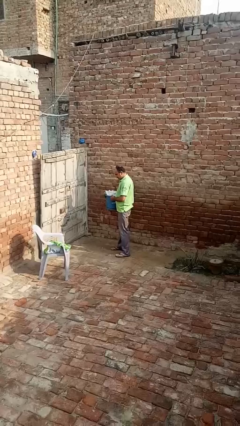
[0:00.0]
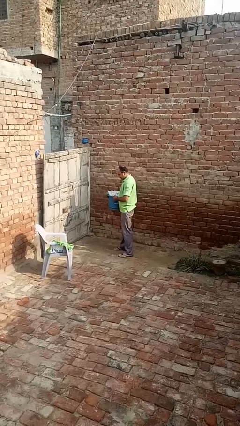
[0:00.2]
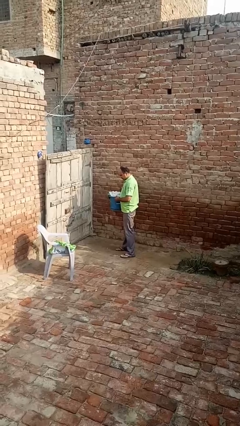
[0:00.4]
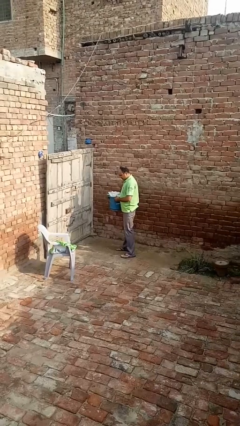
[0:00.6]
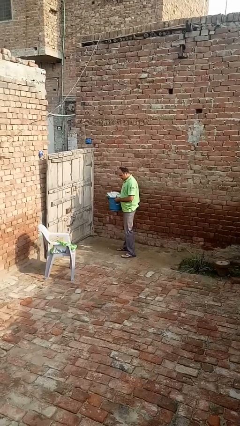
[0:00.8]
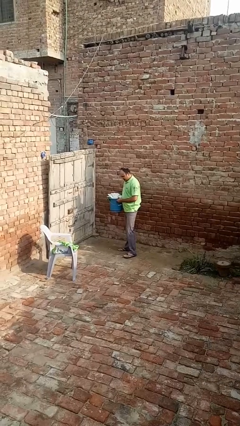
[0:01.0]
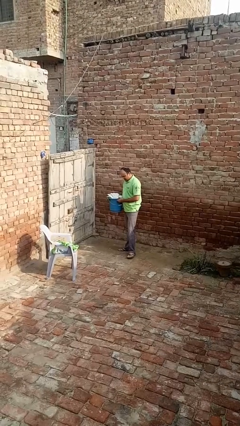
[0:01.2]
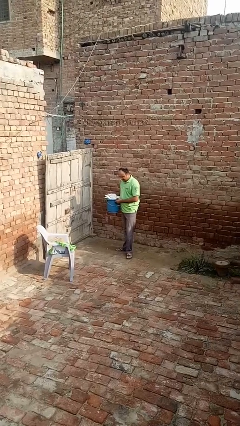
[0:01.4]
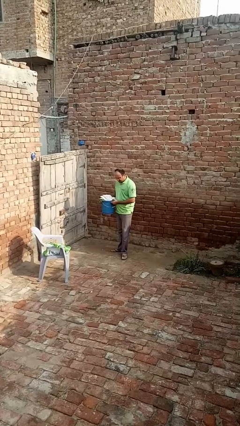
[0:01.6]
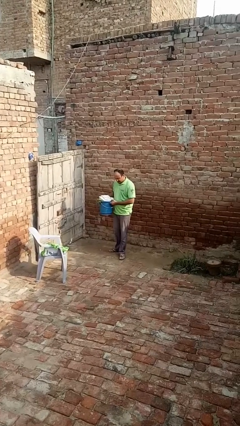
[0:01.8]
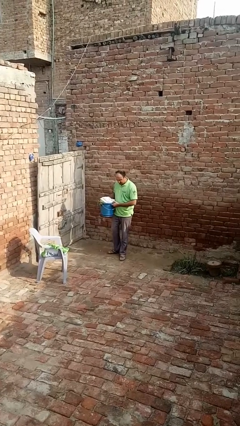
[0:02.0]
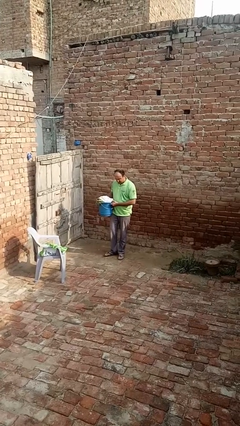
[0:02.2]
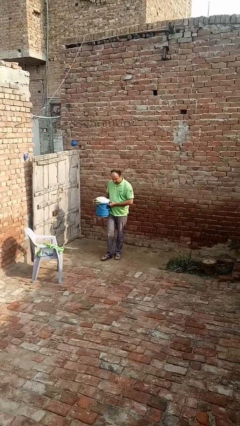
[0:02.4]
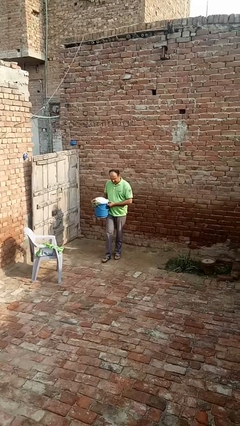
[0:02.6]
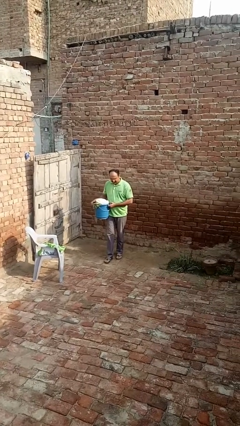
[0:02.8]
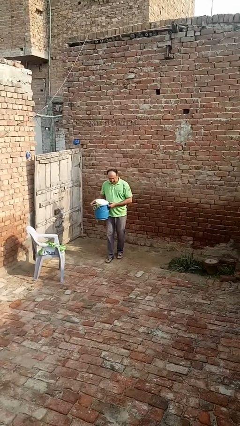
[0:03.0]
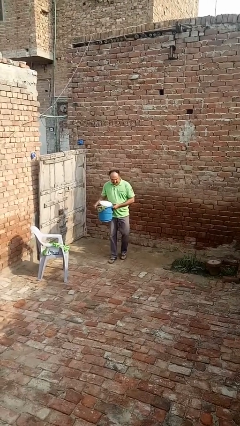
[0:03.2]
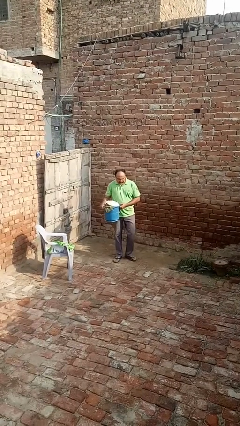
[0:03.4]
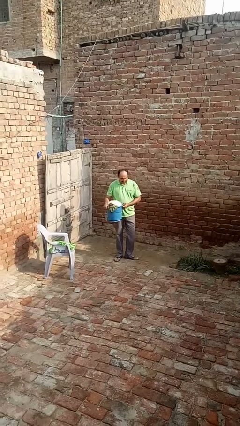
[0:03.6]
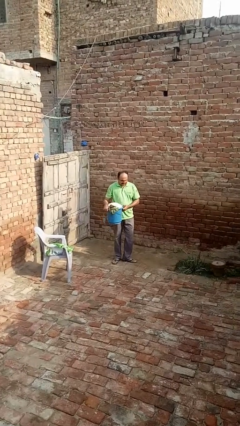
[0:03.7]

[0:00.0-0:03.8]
person carries laundry basket

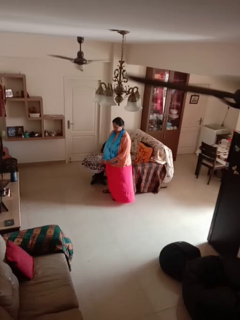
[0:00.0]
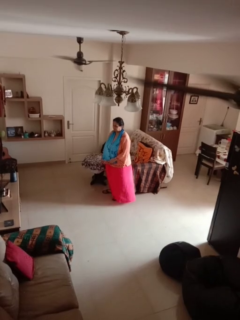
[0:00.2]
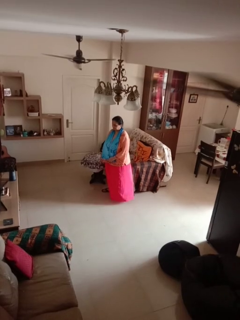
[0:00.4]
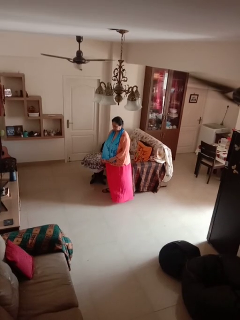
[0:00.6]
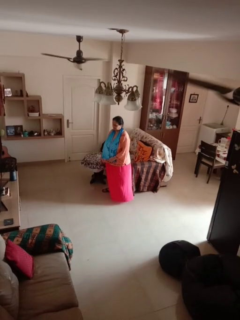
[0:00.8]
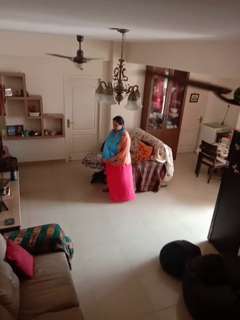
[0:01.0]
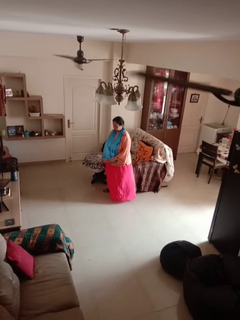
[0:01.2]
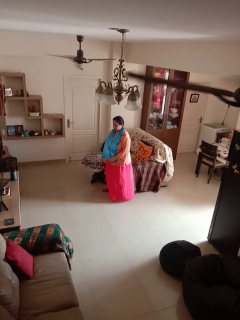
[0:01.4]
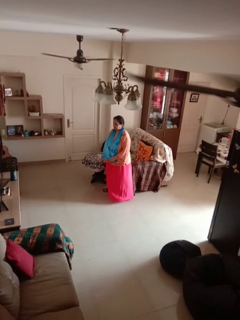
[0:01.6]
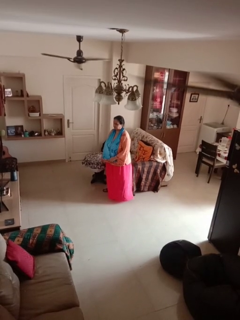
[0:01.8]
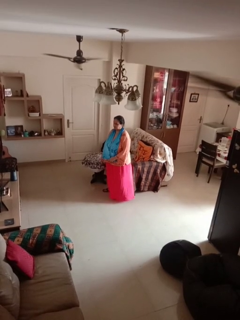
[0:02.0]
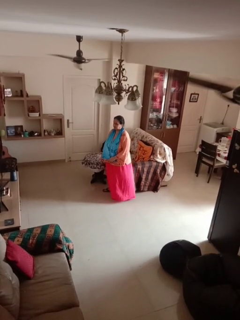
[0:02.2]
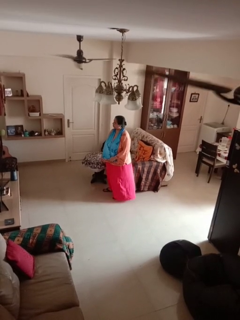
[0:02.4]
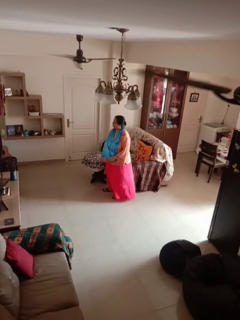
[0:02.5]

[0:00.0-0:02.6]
person nods head

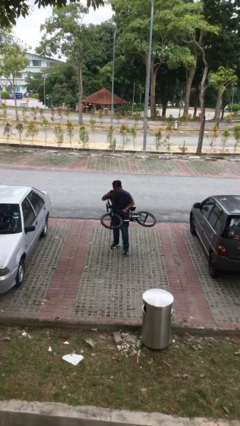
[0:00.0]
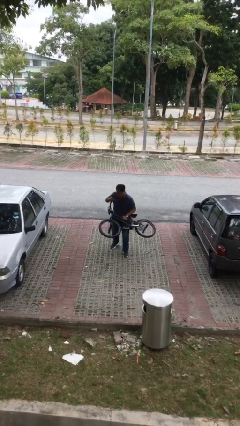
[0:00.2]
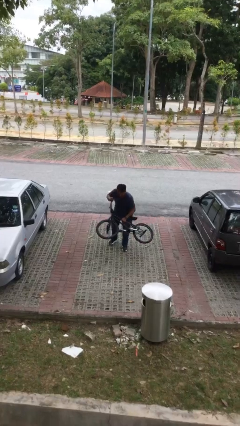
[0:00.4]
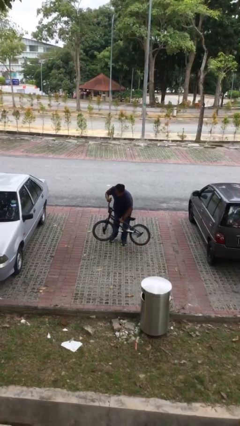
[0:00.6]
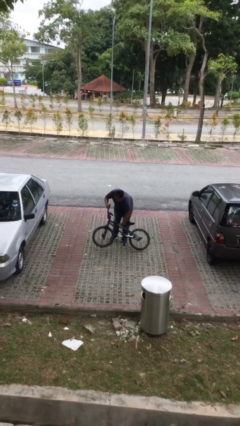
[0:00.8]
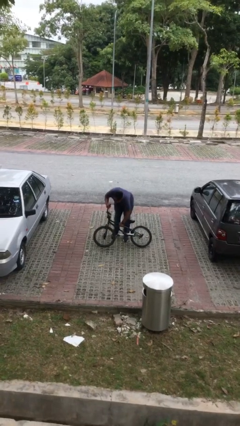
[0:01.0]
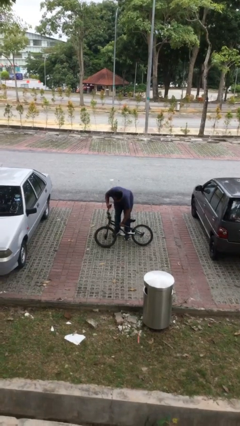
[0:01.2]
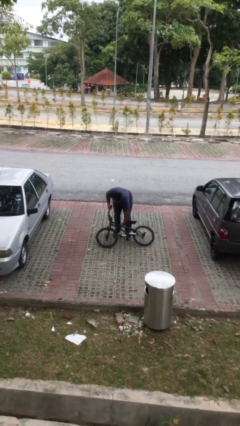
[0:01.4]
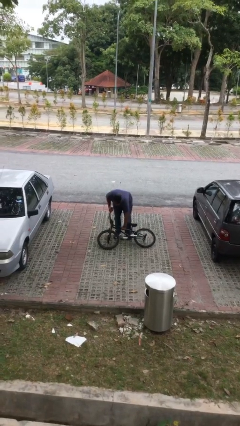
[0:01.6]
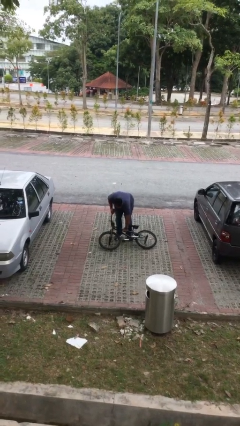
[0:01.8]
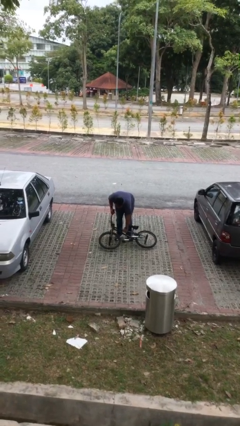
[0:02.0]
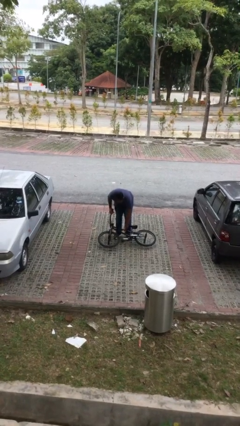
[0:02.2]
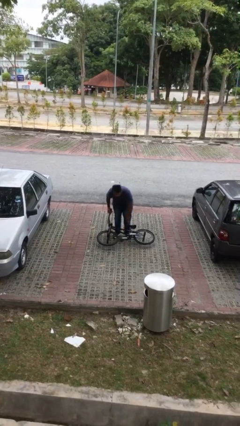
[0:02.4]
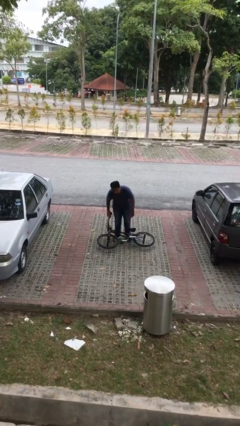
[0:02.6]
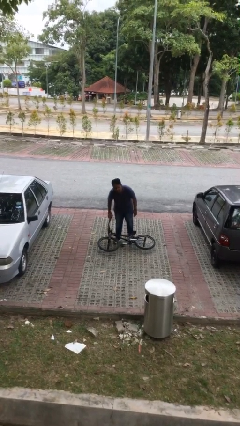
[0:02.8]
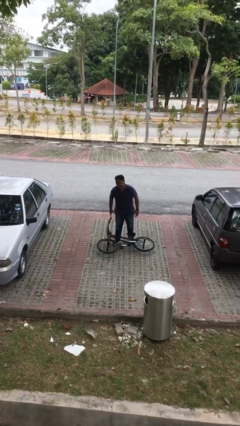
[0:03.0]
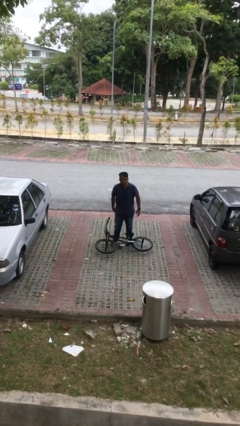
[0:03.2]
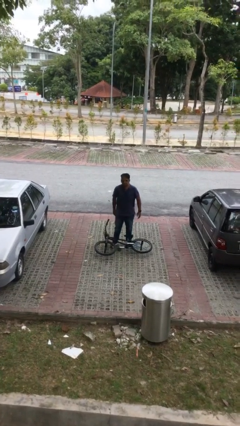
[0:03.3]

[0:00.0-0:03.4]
person puts down object on floor

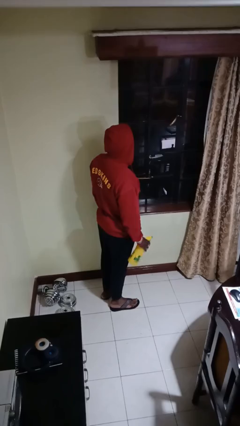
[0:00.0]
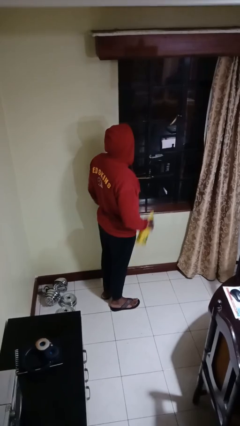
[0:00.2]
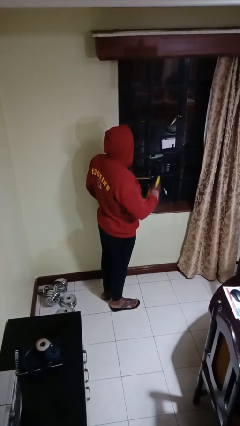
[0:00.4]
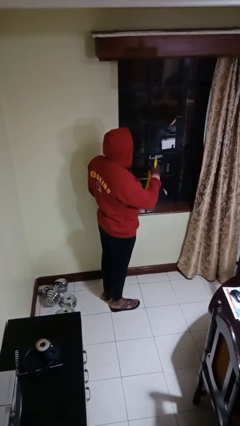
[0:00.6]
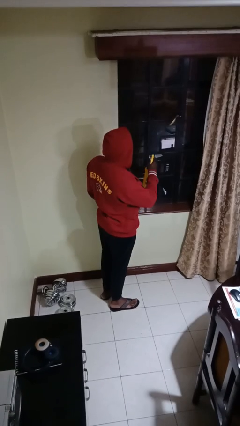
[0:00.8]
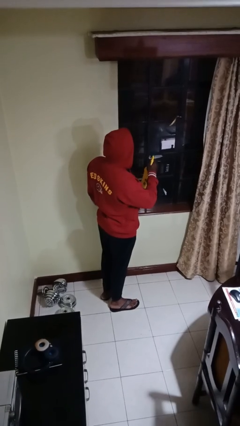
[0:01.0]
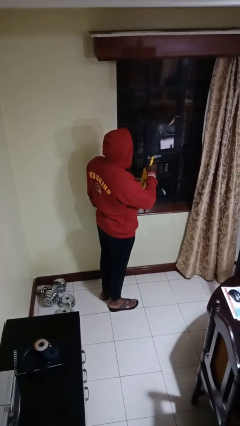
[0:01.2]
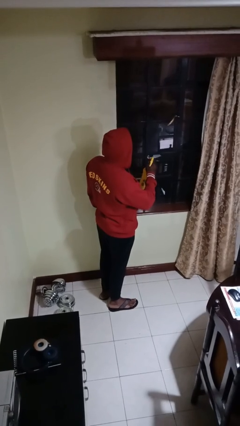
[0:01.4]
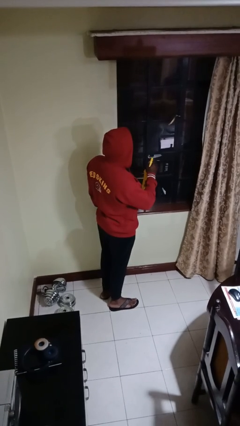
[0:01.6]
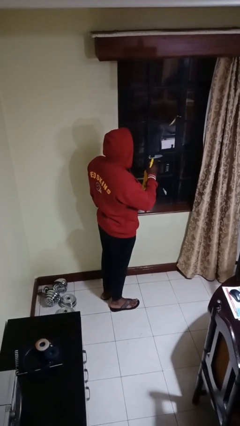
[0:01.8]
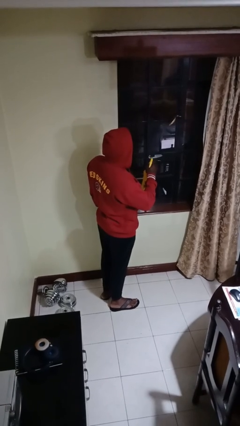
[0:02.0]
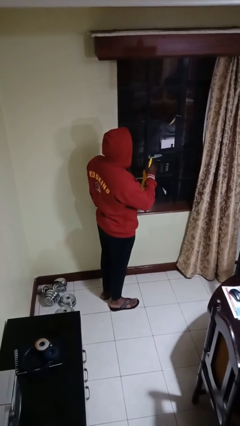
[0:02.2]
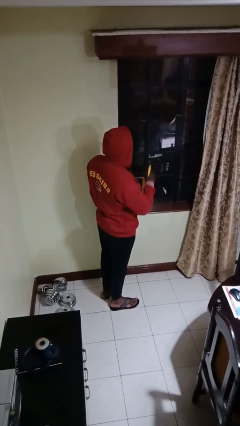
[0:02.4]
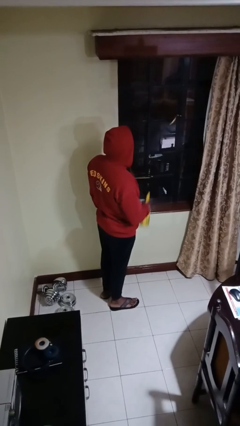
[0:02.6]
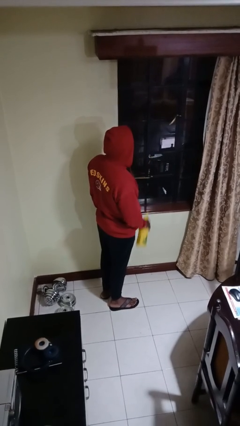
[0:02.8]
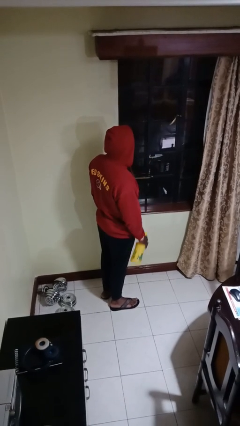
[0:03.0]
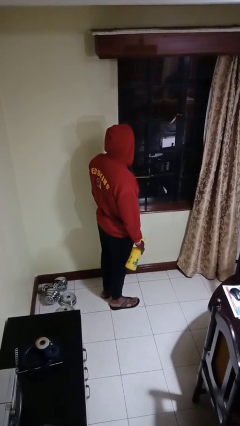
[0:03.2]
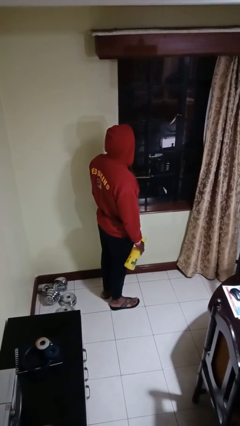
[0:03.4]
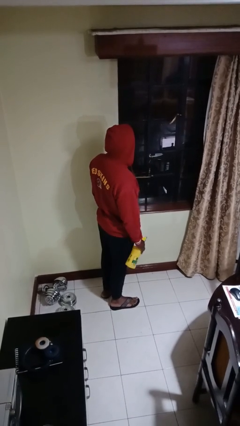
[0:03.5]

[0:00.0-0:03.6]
person sprays from bottle

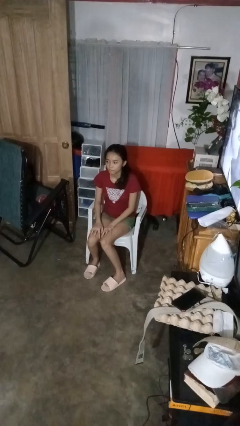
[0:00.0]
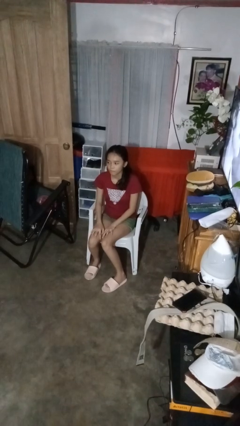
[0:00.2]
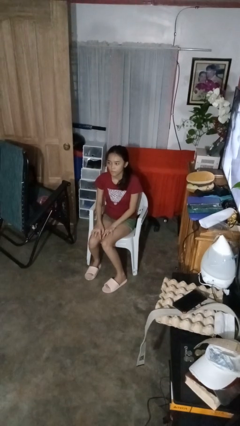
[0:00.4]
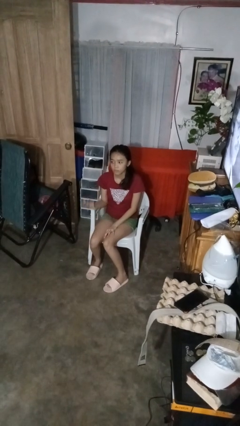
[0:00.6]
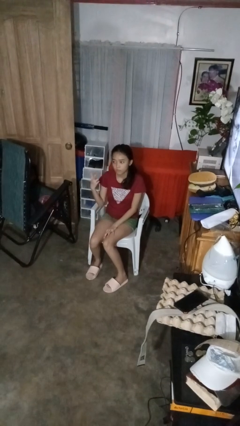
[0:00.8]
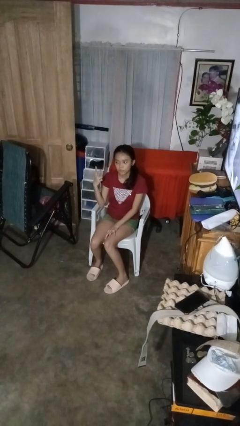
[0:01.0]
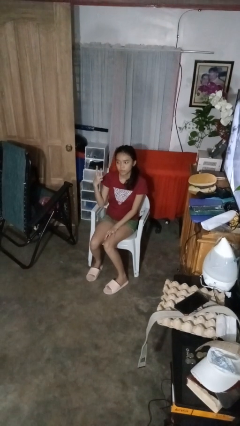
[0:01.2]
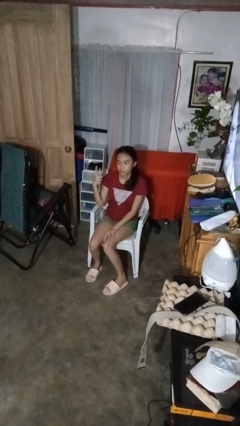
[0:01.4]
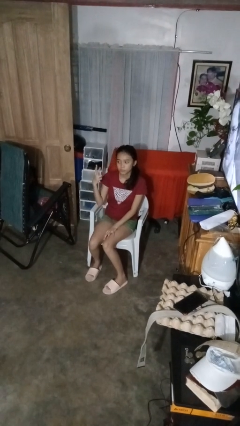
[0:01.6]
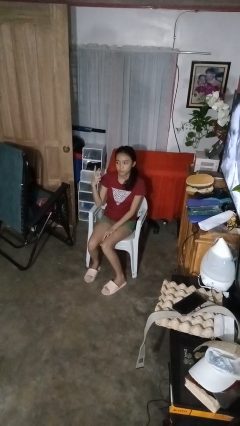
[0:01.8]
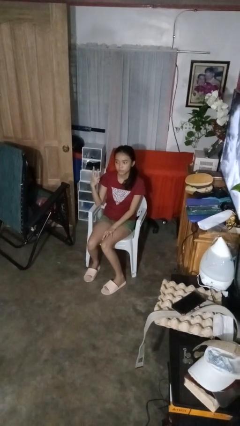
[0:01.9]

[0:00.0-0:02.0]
person gestures peace

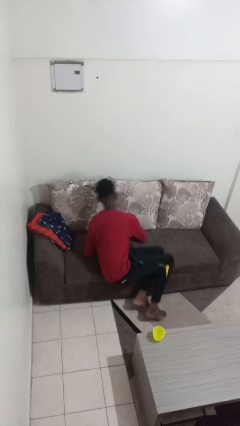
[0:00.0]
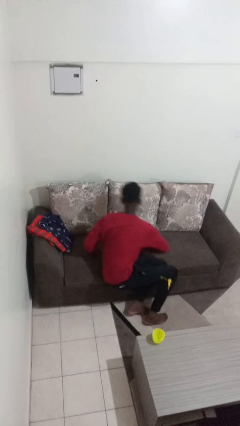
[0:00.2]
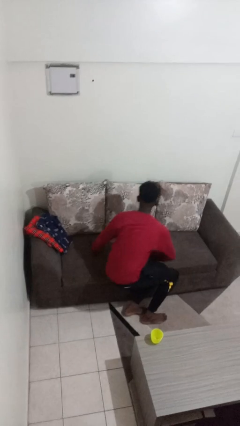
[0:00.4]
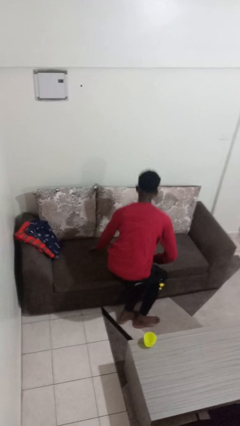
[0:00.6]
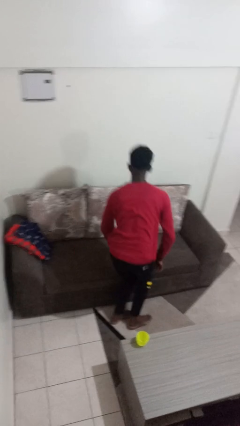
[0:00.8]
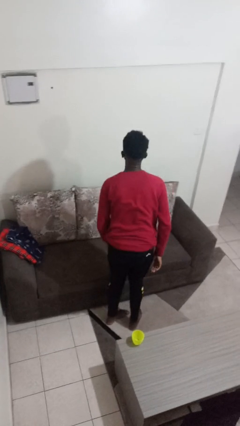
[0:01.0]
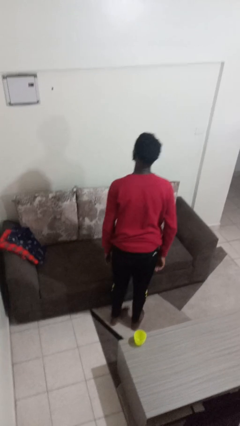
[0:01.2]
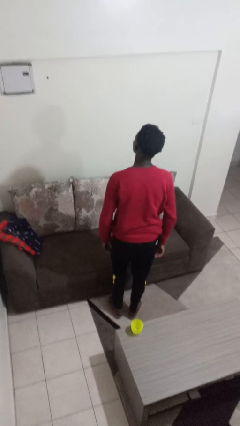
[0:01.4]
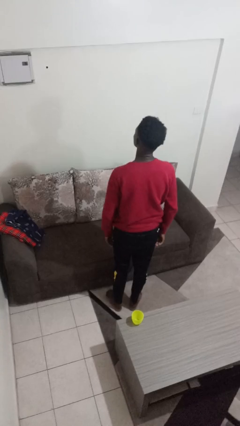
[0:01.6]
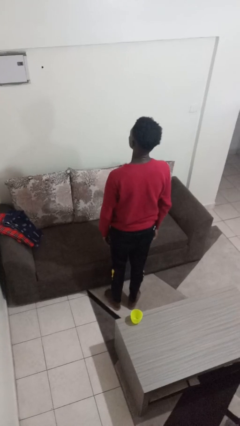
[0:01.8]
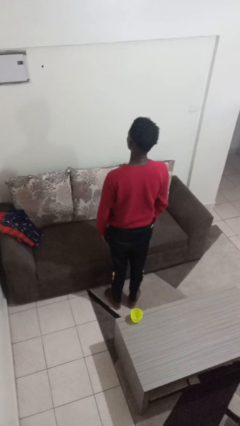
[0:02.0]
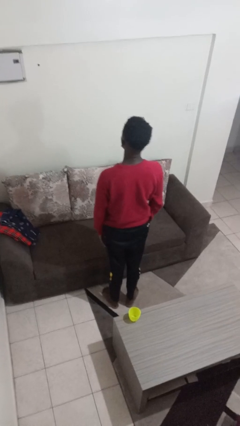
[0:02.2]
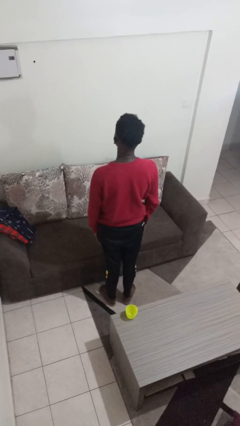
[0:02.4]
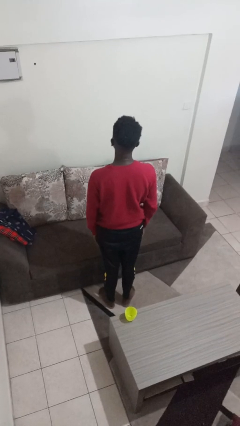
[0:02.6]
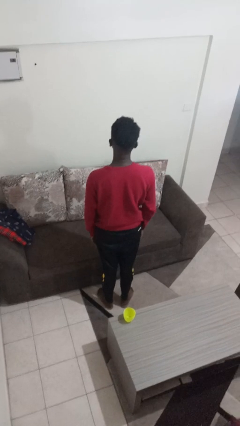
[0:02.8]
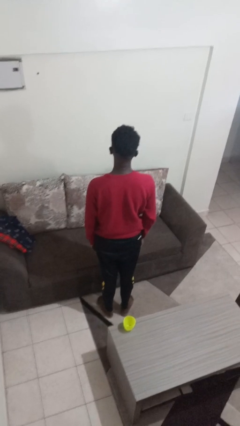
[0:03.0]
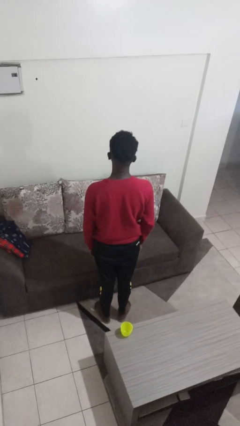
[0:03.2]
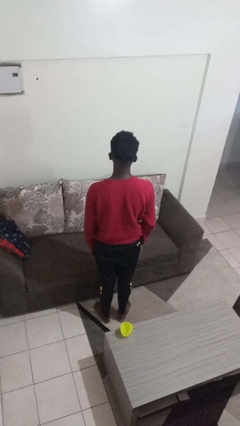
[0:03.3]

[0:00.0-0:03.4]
person stands up
